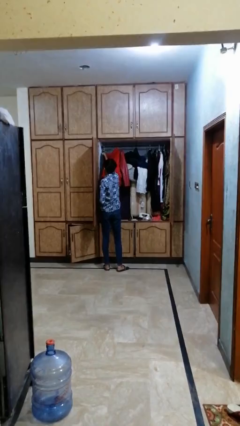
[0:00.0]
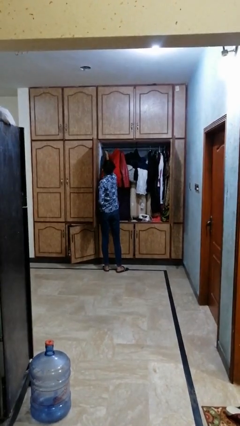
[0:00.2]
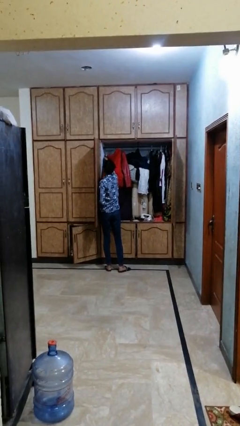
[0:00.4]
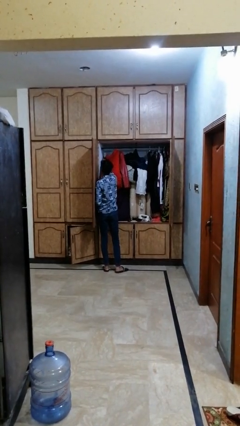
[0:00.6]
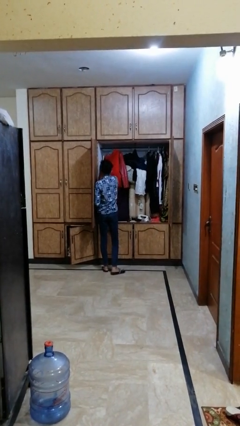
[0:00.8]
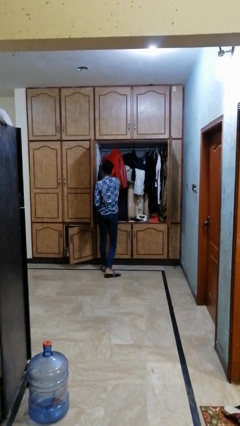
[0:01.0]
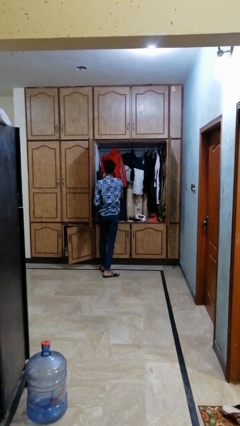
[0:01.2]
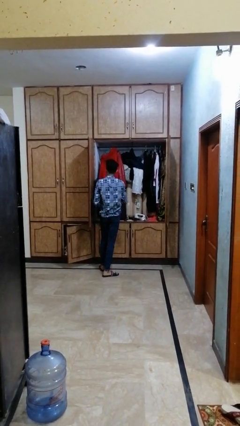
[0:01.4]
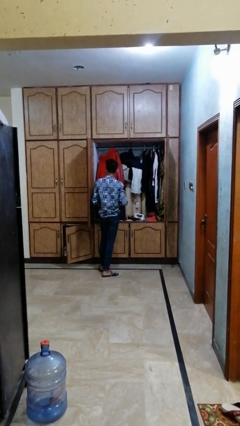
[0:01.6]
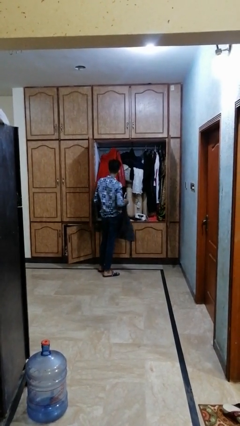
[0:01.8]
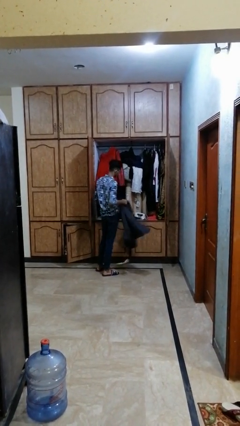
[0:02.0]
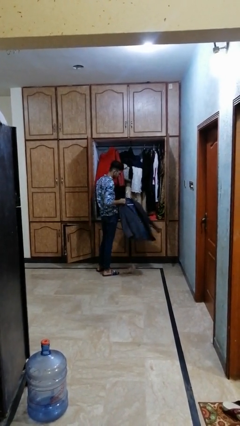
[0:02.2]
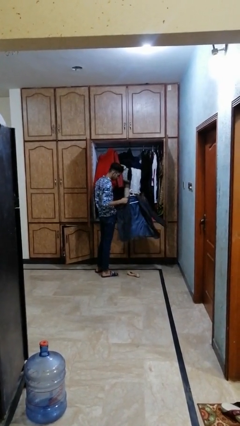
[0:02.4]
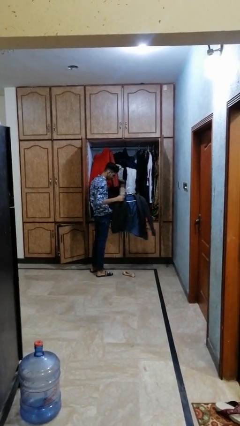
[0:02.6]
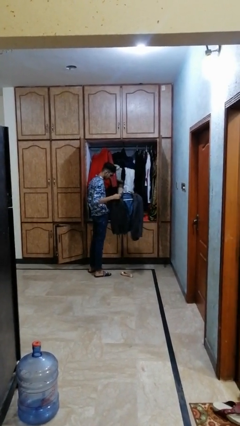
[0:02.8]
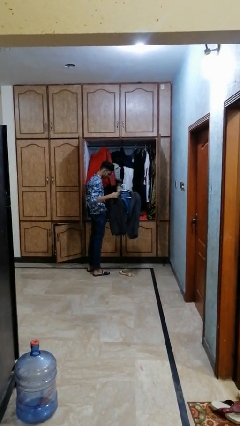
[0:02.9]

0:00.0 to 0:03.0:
person takes clothes from dresser

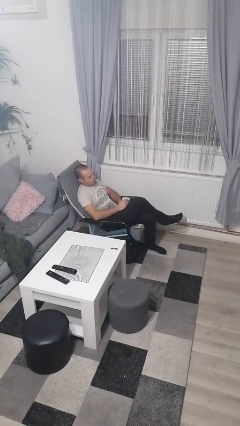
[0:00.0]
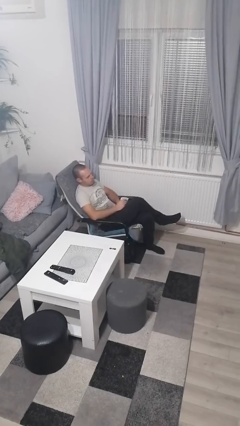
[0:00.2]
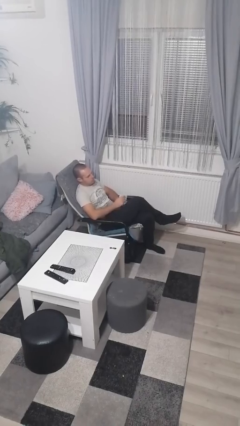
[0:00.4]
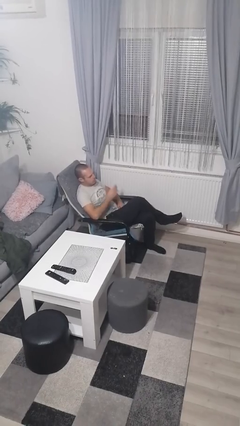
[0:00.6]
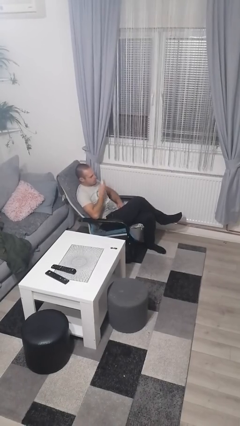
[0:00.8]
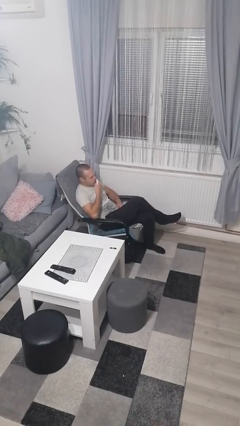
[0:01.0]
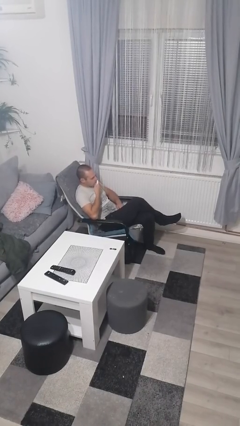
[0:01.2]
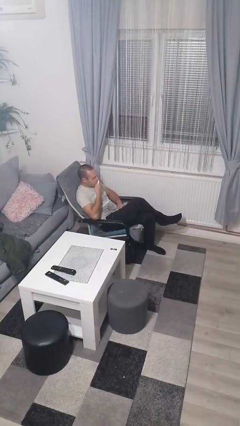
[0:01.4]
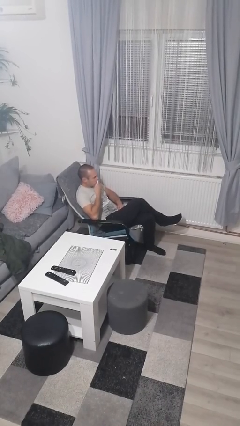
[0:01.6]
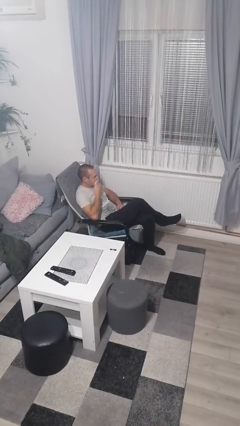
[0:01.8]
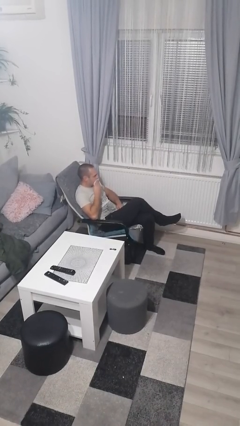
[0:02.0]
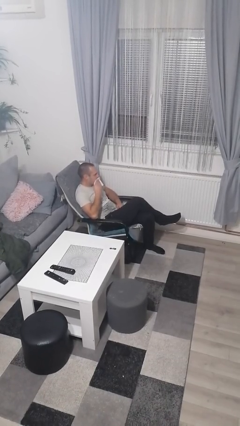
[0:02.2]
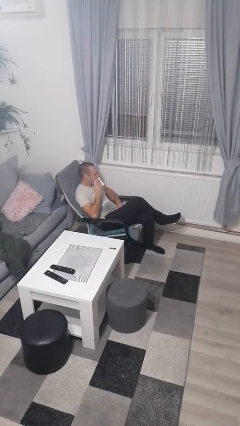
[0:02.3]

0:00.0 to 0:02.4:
person wipes mouth with napkin

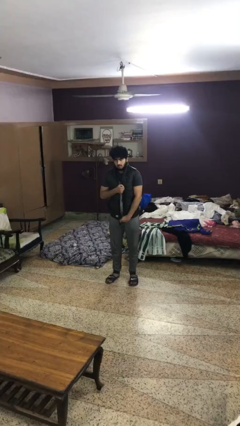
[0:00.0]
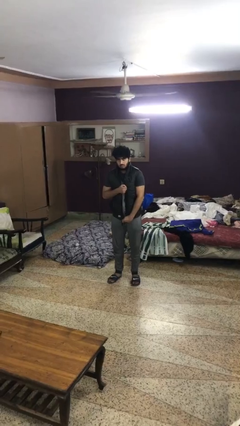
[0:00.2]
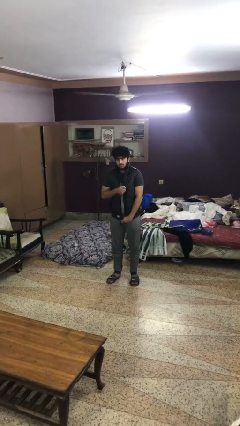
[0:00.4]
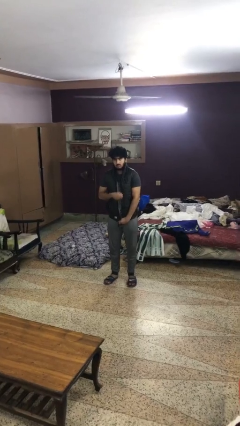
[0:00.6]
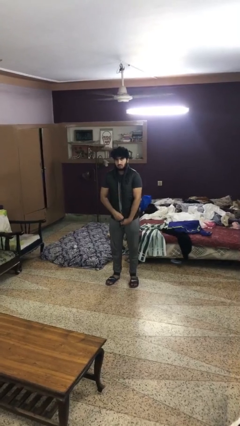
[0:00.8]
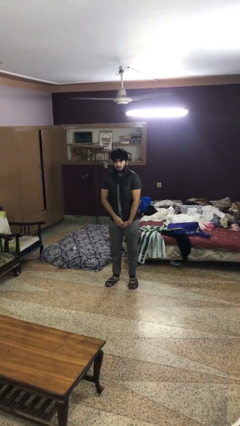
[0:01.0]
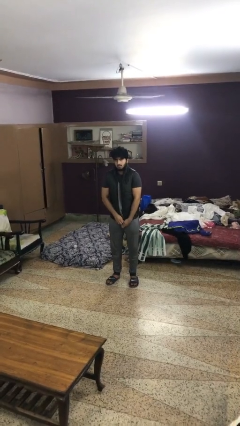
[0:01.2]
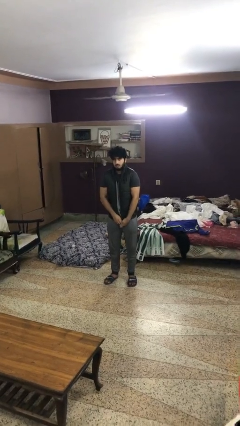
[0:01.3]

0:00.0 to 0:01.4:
person unzips jacket

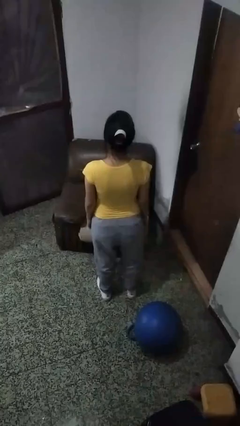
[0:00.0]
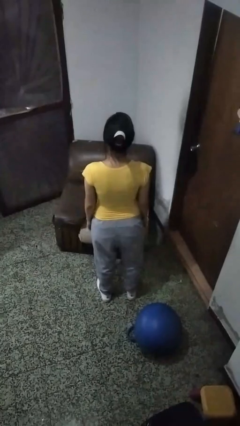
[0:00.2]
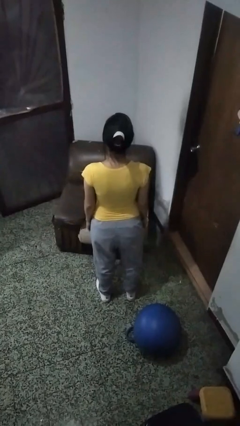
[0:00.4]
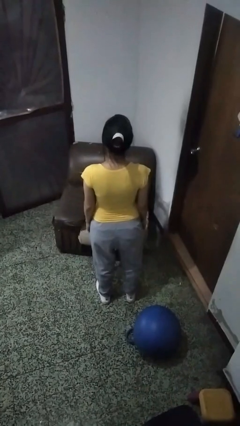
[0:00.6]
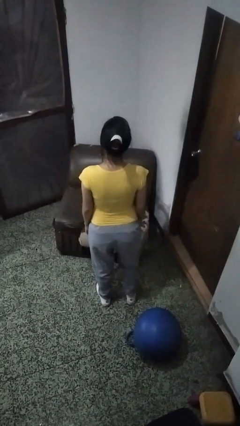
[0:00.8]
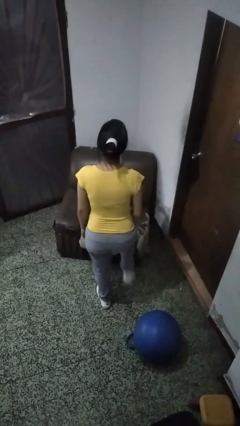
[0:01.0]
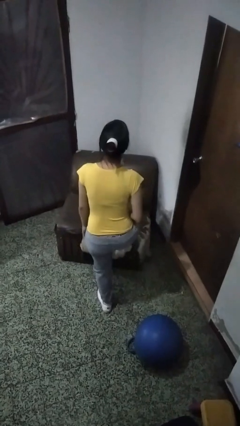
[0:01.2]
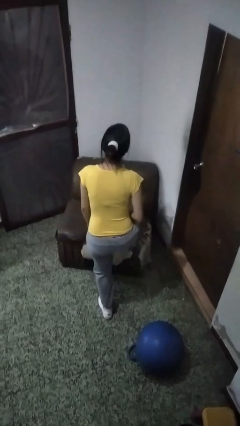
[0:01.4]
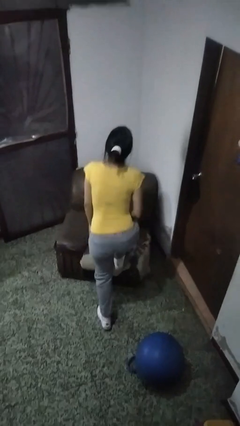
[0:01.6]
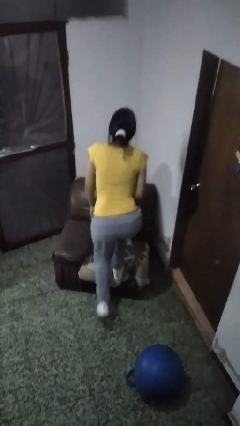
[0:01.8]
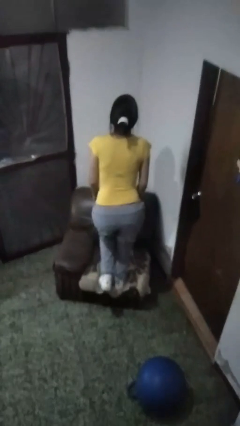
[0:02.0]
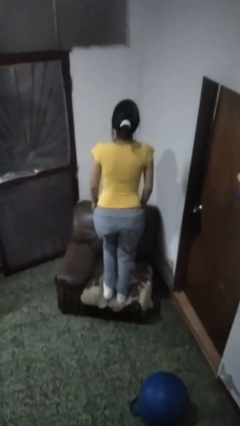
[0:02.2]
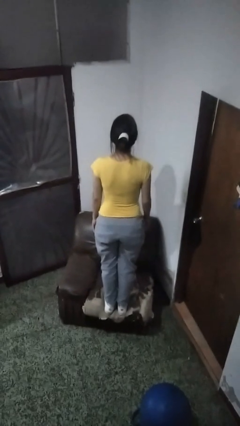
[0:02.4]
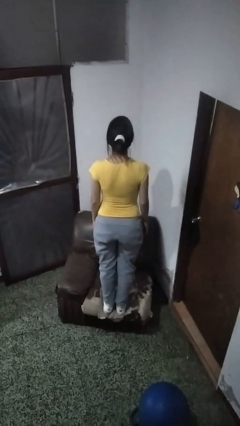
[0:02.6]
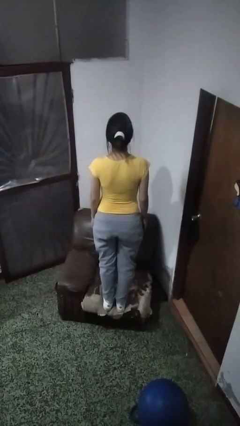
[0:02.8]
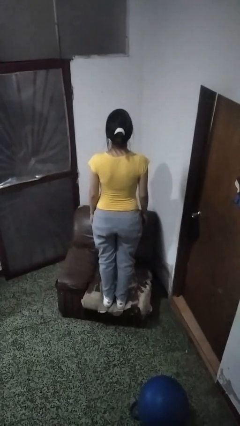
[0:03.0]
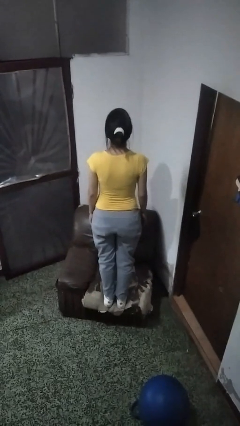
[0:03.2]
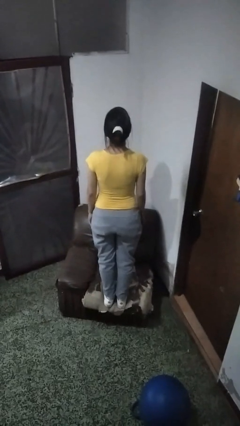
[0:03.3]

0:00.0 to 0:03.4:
person climbs on couch

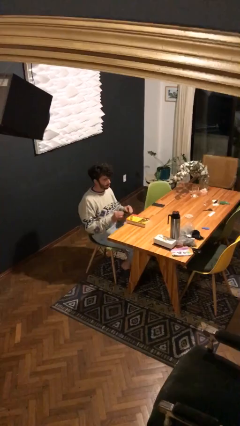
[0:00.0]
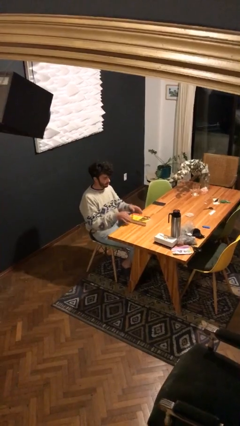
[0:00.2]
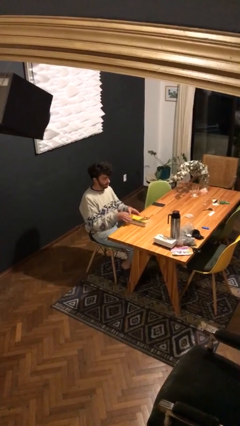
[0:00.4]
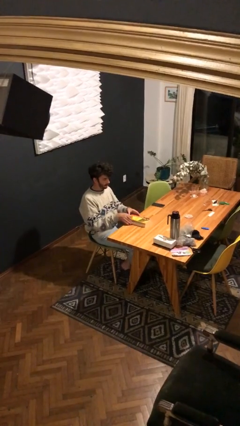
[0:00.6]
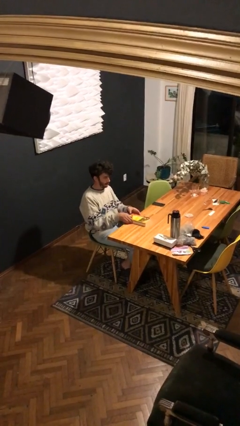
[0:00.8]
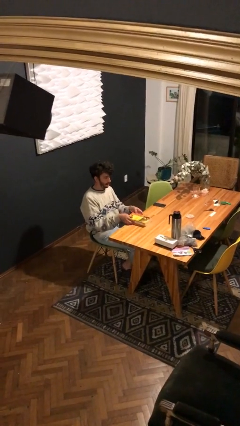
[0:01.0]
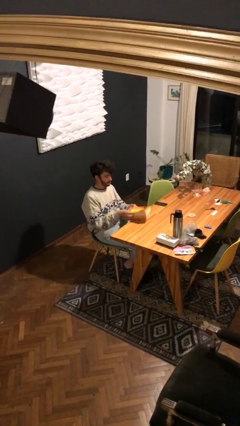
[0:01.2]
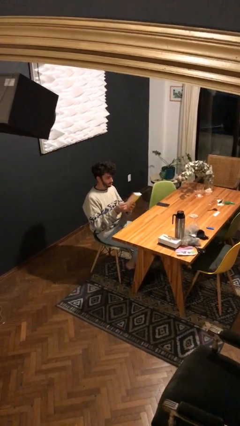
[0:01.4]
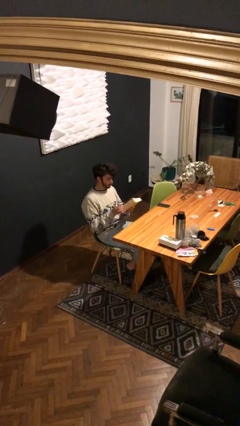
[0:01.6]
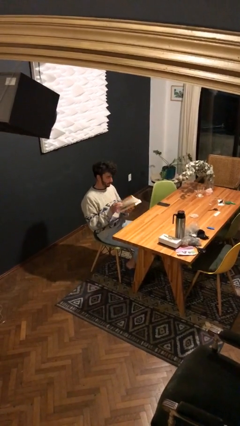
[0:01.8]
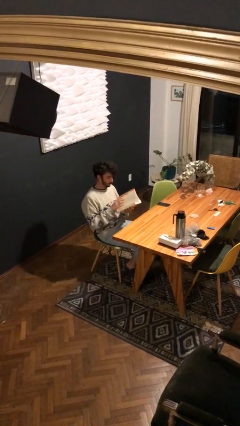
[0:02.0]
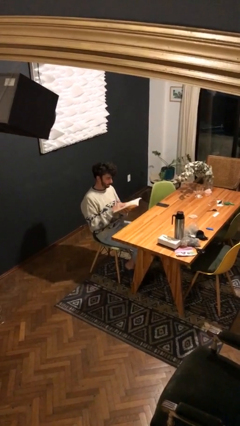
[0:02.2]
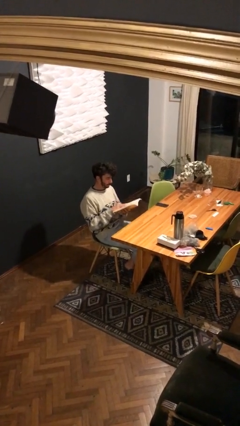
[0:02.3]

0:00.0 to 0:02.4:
person picks up object from table

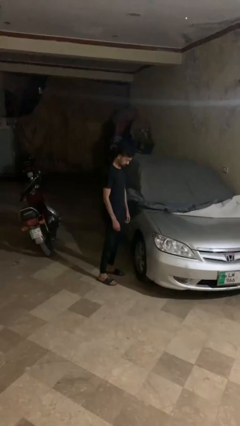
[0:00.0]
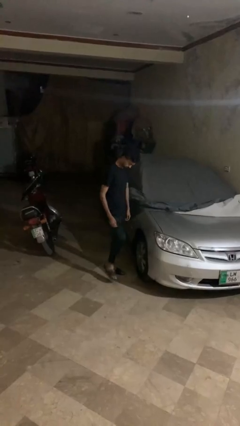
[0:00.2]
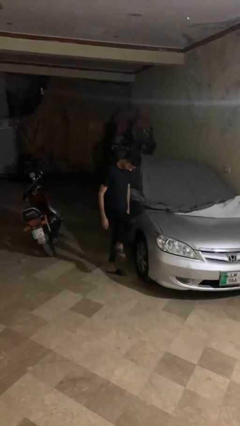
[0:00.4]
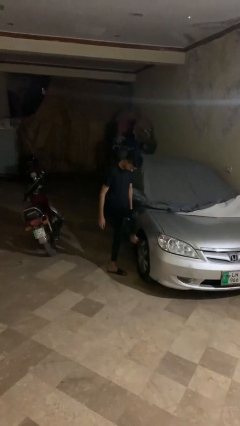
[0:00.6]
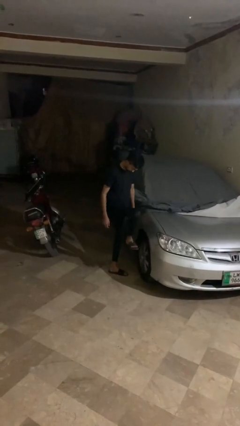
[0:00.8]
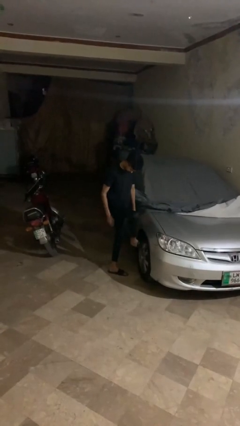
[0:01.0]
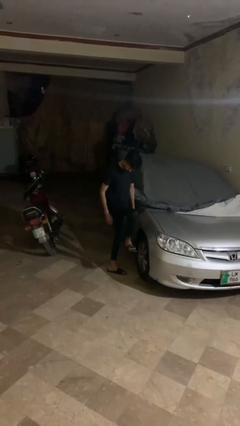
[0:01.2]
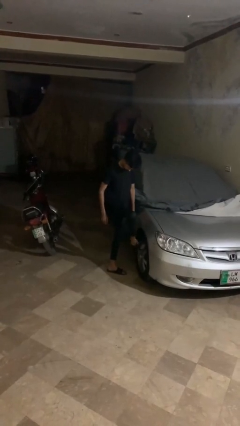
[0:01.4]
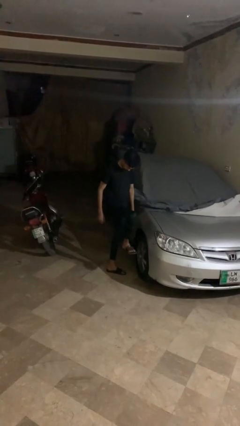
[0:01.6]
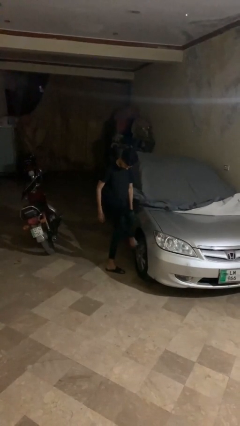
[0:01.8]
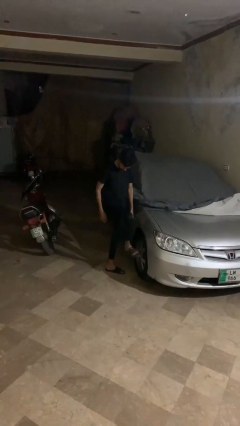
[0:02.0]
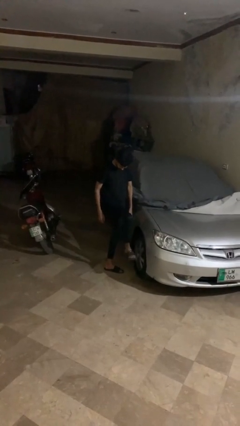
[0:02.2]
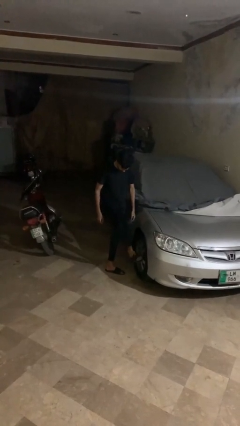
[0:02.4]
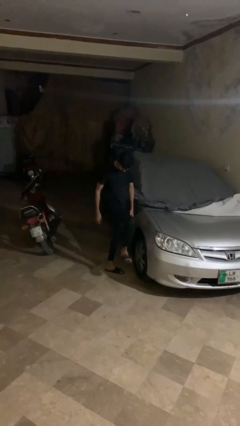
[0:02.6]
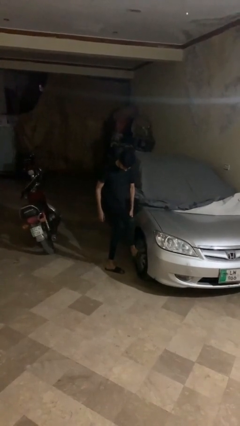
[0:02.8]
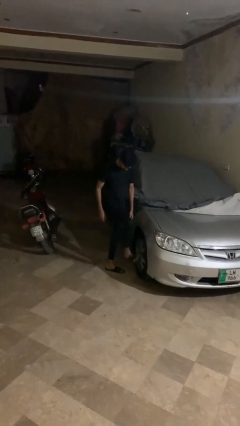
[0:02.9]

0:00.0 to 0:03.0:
person kicks car tires

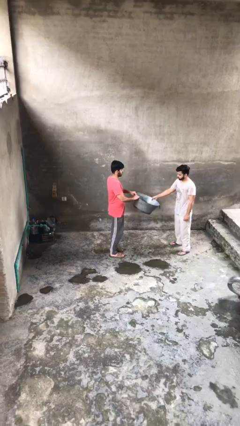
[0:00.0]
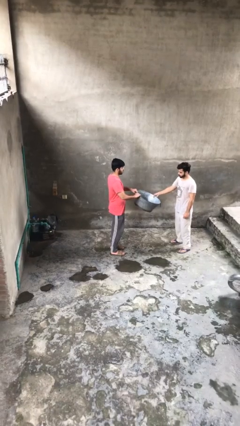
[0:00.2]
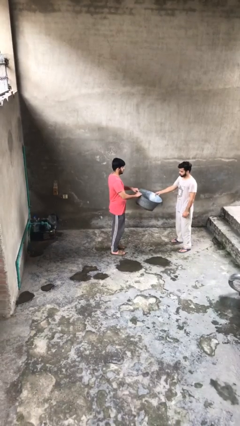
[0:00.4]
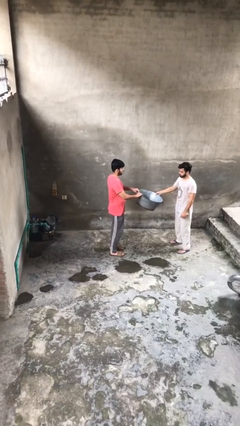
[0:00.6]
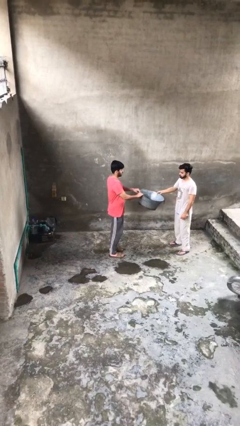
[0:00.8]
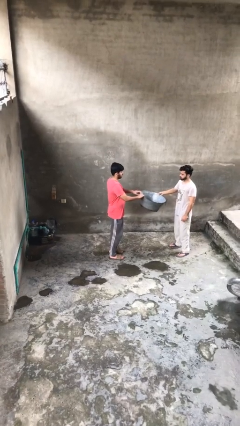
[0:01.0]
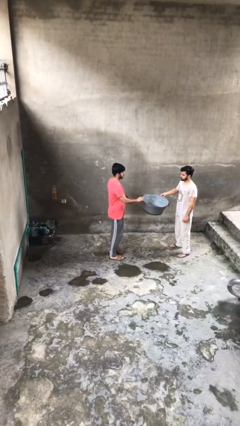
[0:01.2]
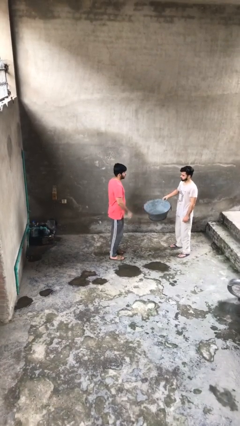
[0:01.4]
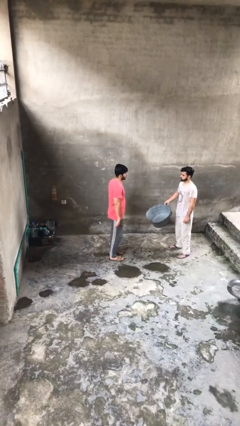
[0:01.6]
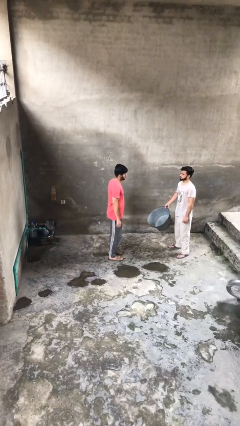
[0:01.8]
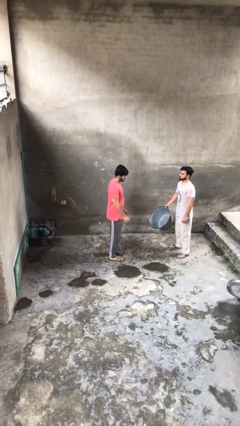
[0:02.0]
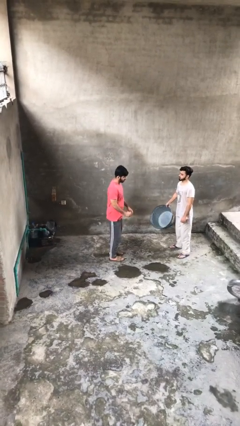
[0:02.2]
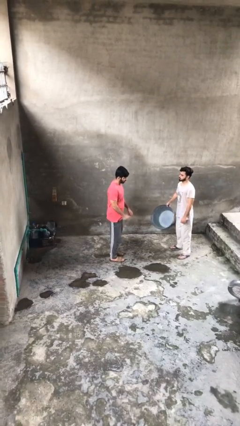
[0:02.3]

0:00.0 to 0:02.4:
person transfers object to person
